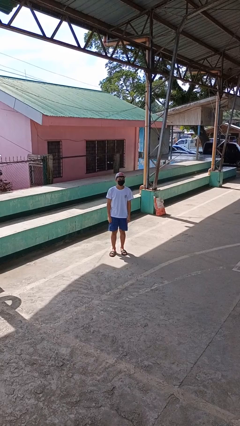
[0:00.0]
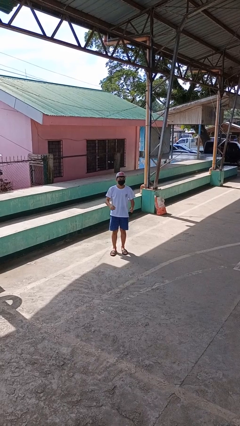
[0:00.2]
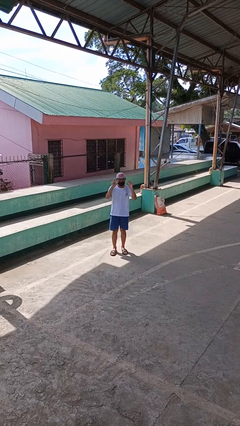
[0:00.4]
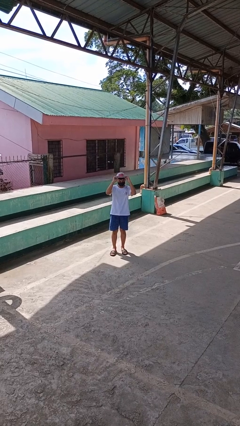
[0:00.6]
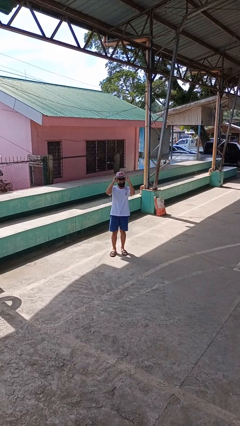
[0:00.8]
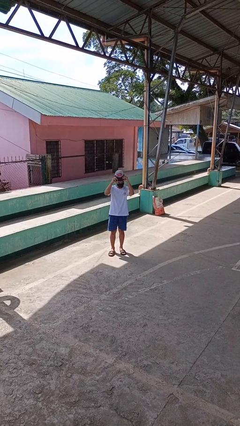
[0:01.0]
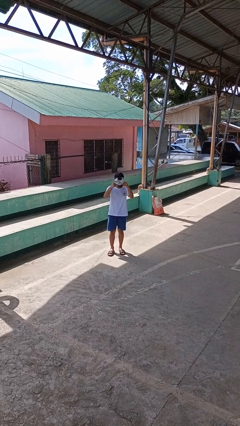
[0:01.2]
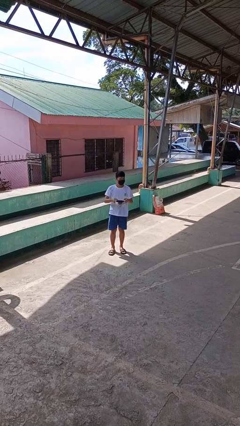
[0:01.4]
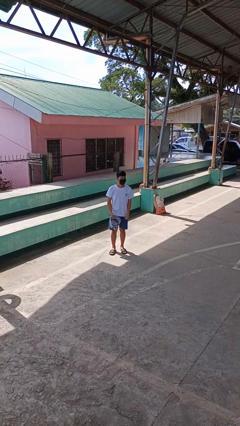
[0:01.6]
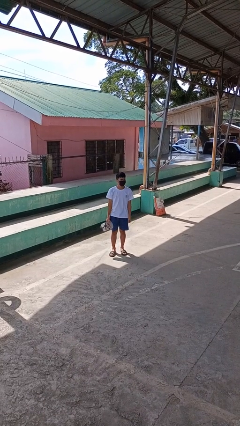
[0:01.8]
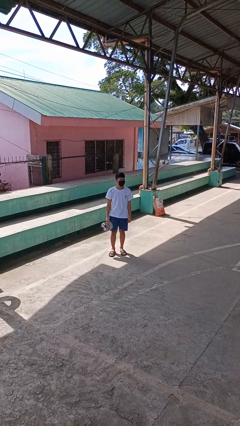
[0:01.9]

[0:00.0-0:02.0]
person takes off hat

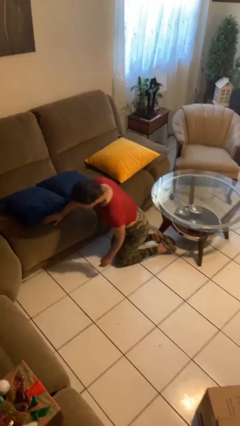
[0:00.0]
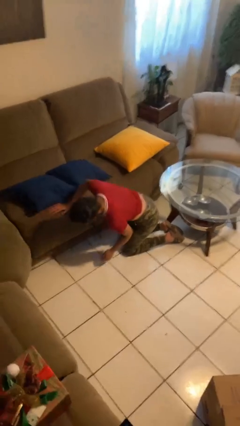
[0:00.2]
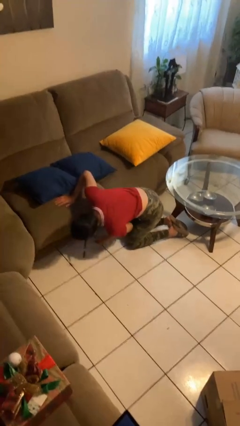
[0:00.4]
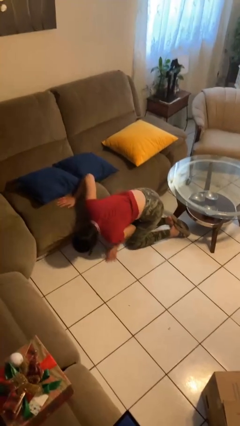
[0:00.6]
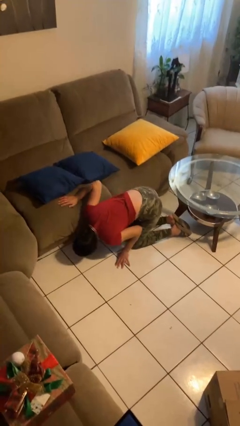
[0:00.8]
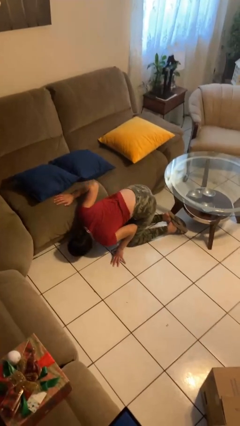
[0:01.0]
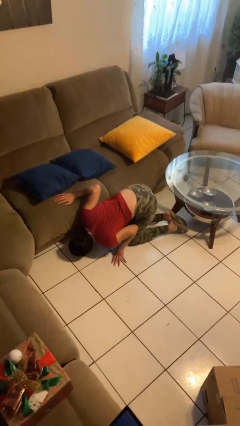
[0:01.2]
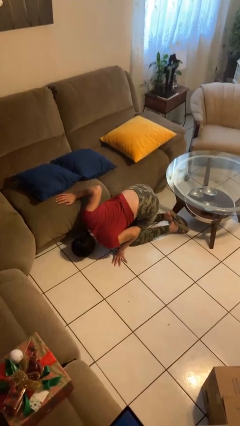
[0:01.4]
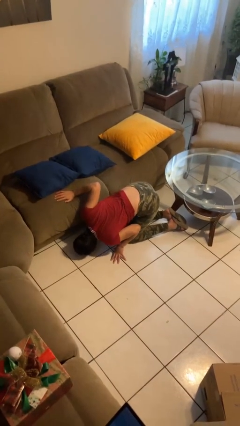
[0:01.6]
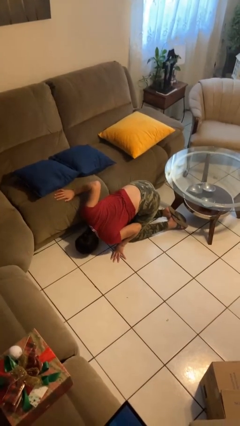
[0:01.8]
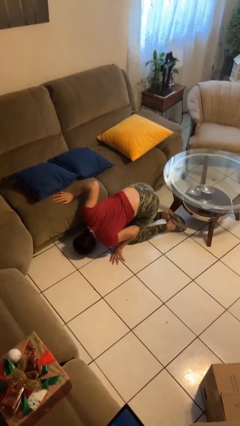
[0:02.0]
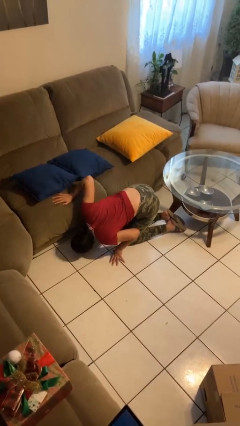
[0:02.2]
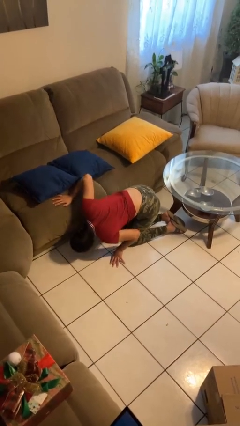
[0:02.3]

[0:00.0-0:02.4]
person searches under couch

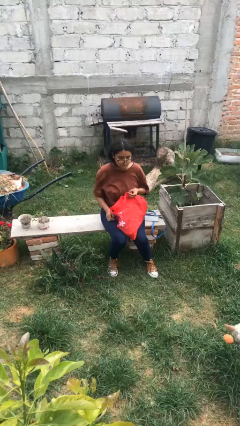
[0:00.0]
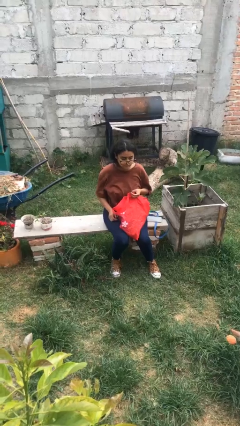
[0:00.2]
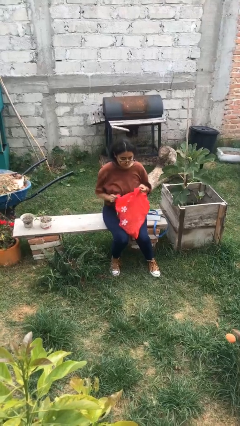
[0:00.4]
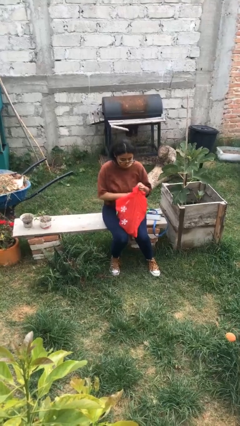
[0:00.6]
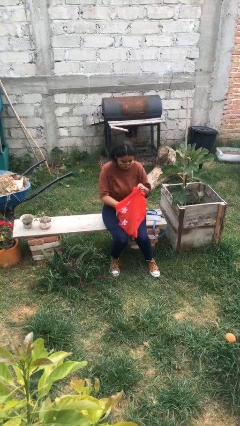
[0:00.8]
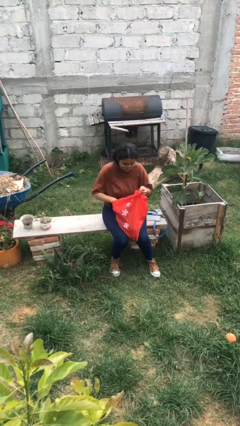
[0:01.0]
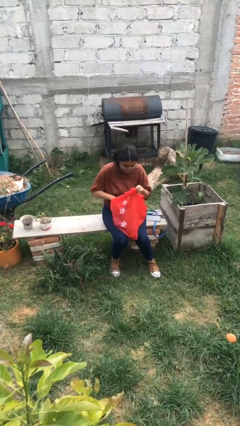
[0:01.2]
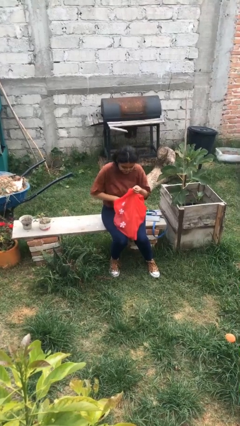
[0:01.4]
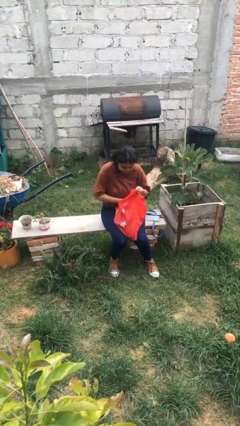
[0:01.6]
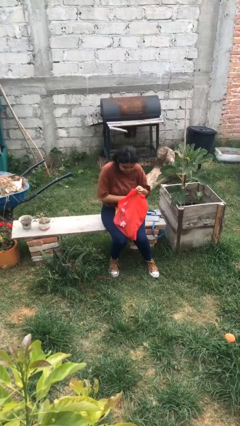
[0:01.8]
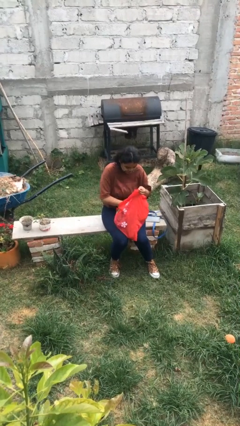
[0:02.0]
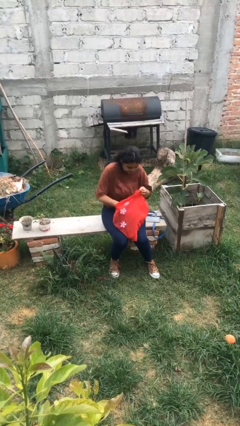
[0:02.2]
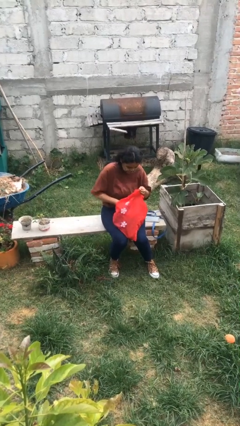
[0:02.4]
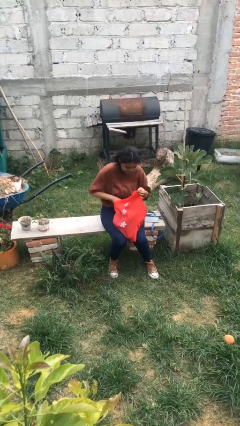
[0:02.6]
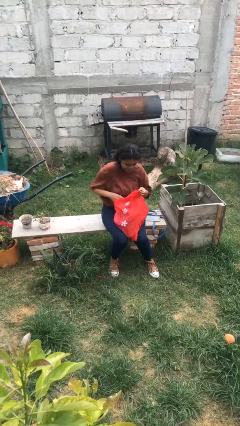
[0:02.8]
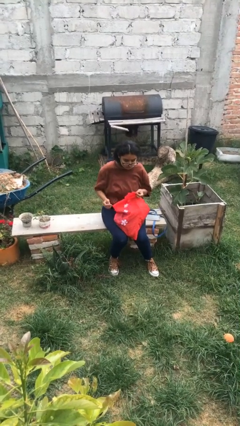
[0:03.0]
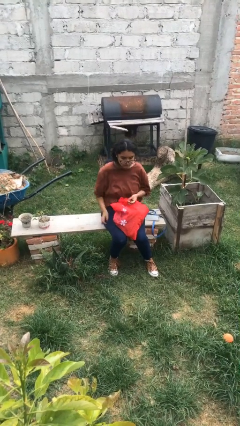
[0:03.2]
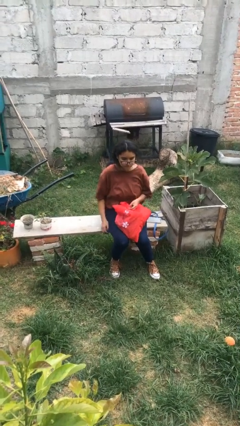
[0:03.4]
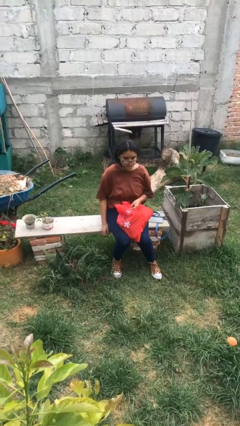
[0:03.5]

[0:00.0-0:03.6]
person searches in bag

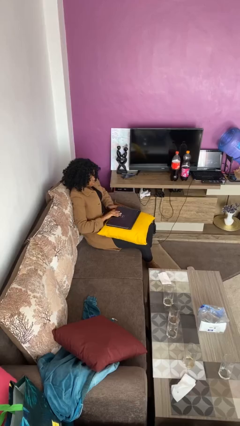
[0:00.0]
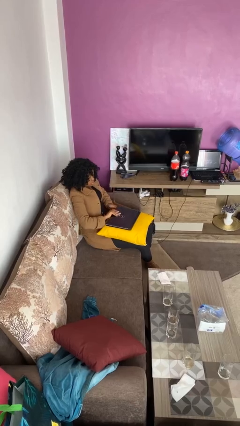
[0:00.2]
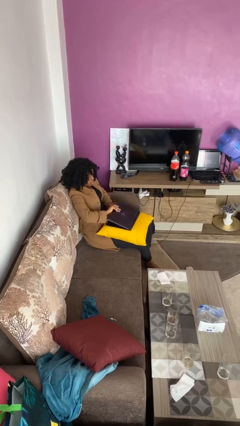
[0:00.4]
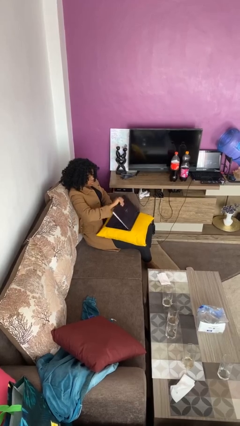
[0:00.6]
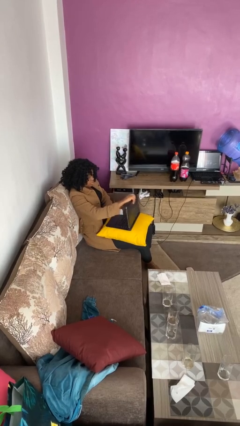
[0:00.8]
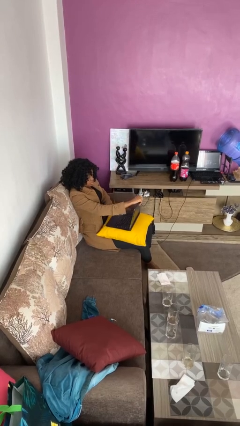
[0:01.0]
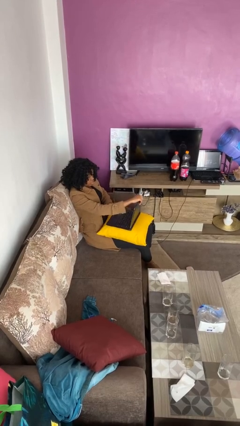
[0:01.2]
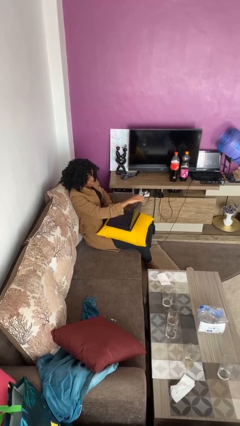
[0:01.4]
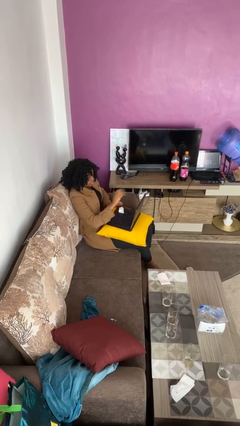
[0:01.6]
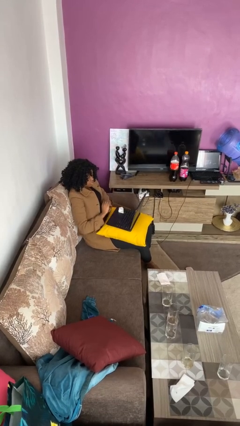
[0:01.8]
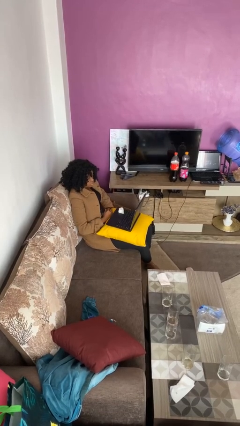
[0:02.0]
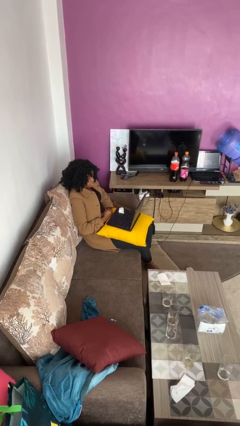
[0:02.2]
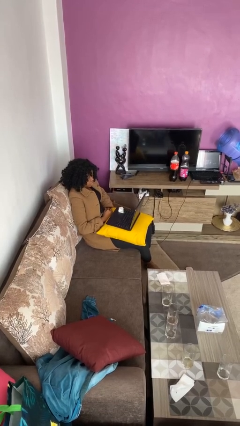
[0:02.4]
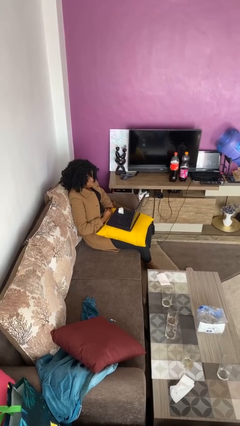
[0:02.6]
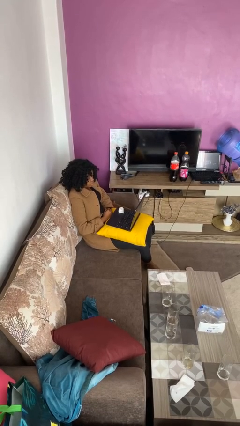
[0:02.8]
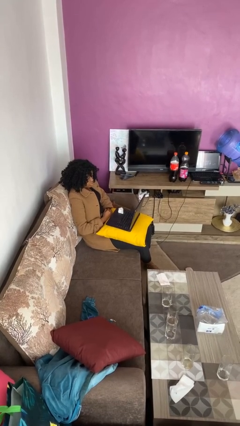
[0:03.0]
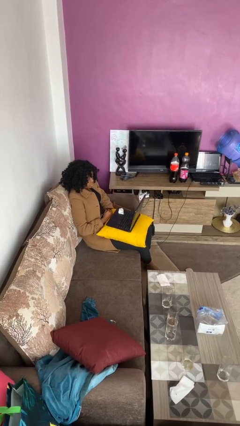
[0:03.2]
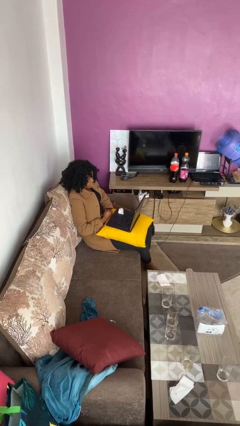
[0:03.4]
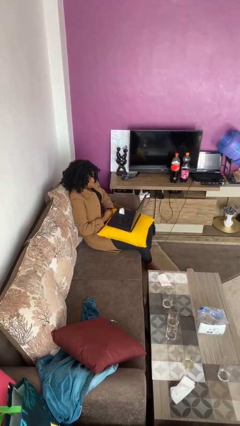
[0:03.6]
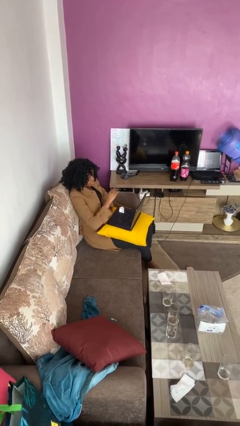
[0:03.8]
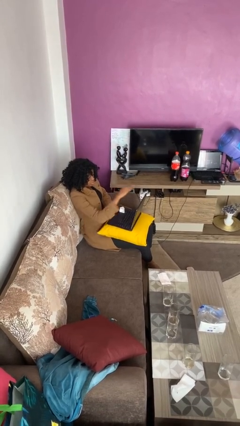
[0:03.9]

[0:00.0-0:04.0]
person opens laptop

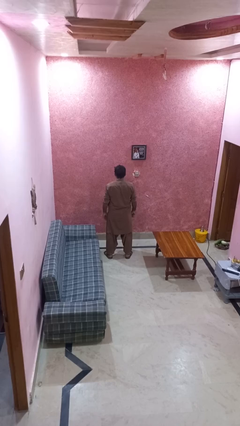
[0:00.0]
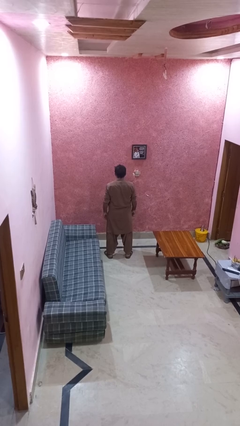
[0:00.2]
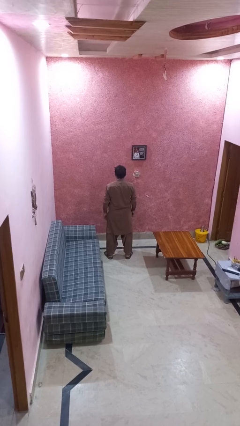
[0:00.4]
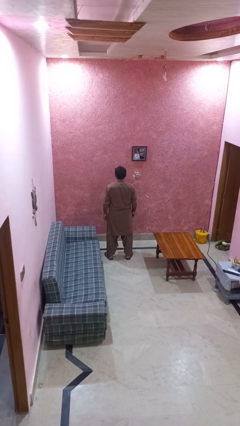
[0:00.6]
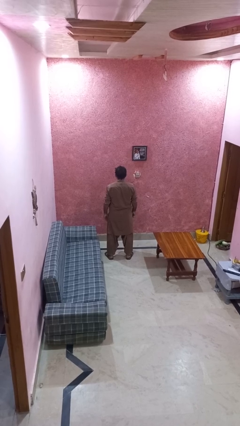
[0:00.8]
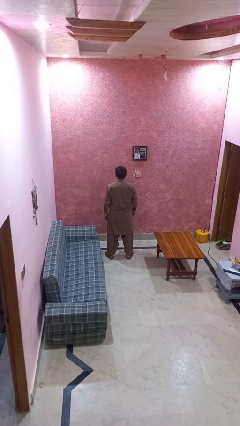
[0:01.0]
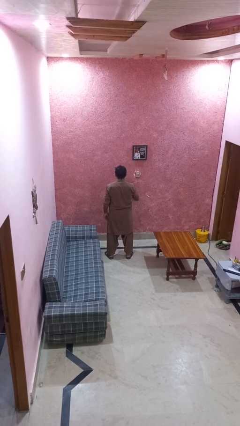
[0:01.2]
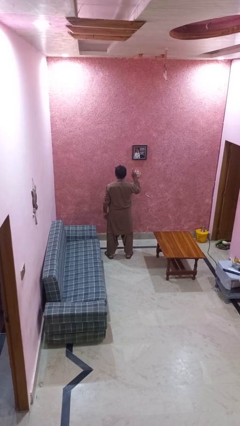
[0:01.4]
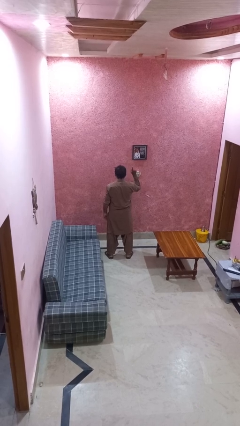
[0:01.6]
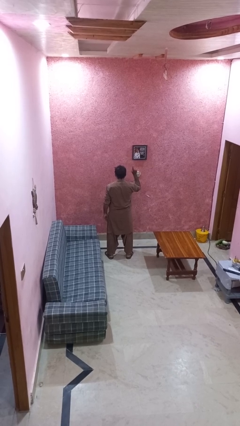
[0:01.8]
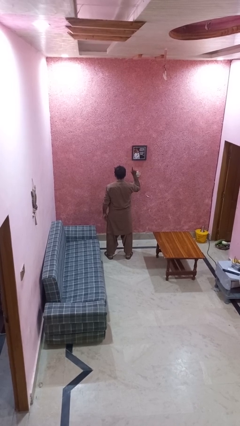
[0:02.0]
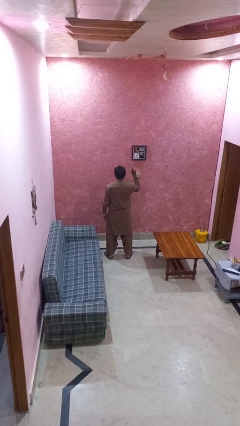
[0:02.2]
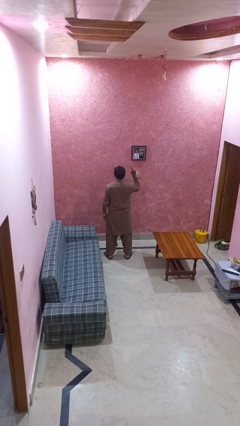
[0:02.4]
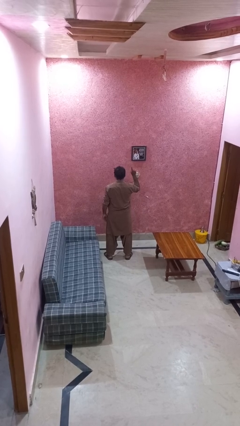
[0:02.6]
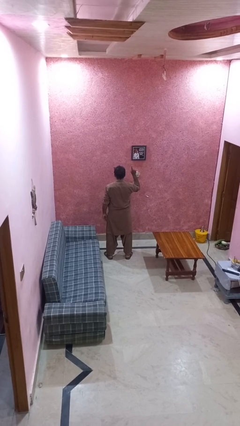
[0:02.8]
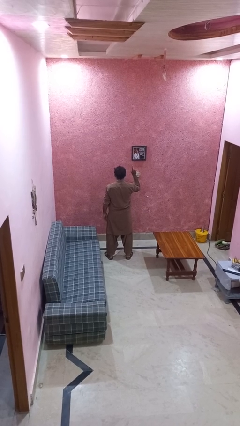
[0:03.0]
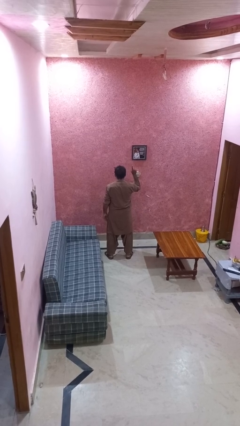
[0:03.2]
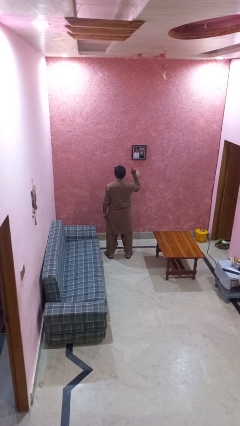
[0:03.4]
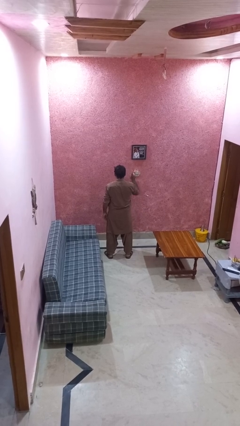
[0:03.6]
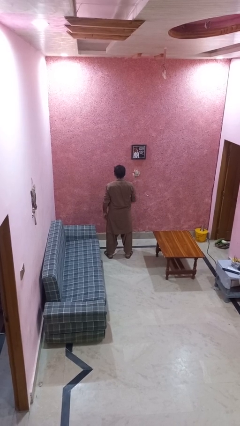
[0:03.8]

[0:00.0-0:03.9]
person gestures number one

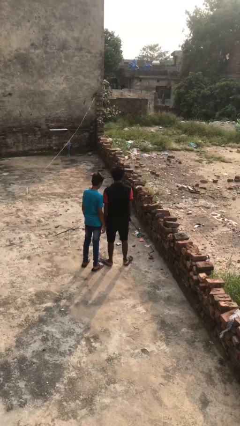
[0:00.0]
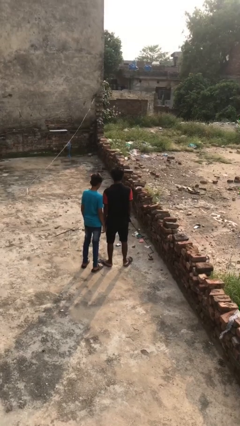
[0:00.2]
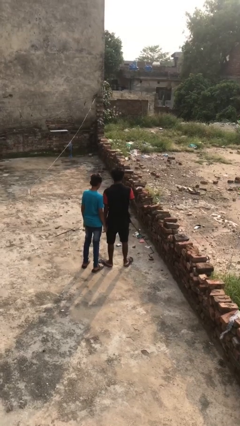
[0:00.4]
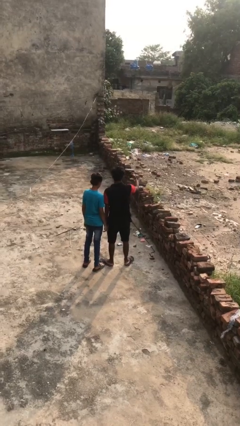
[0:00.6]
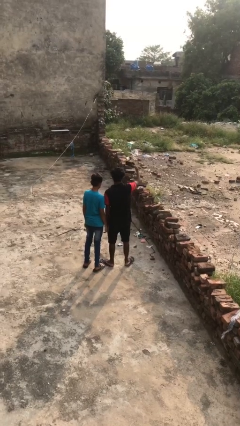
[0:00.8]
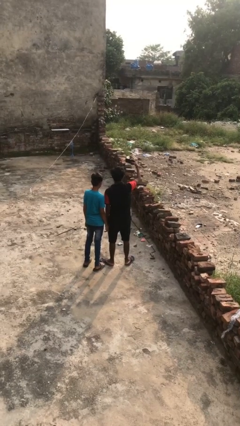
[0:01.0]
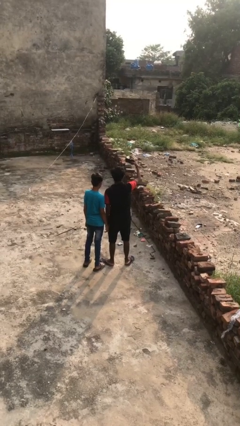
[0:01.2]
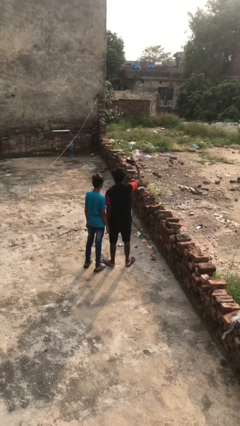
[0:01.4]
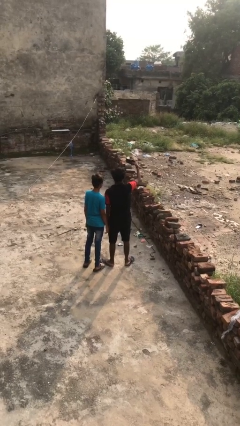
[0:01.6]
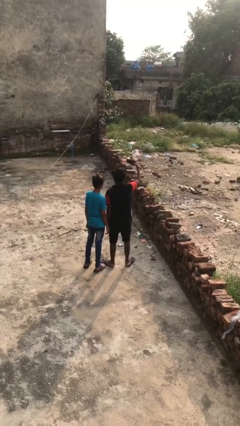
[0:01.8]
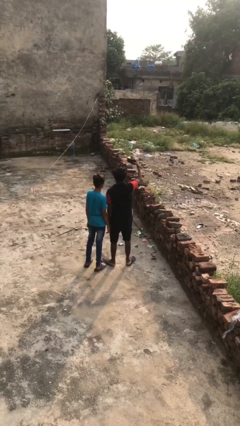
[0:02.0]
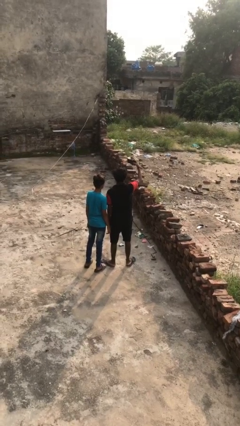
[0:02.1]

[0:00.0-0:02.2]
person takes selfie with person
